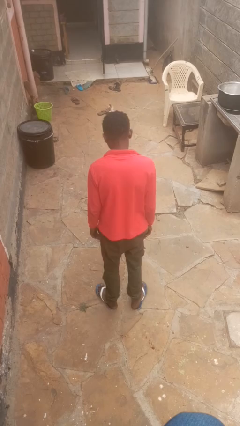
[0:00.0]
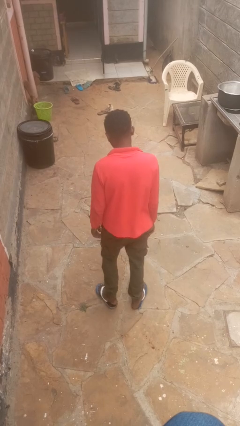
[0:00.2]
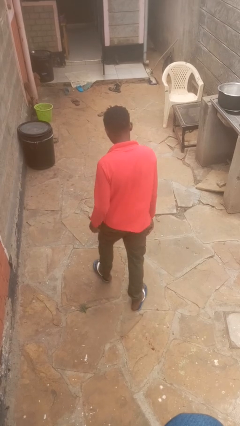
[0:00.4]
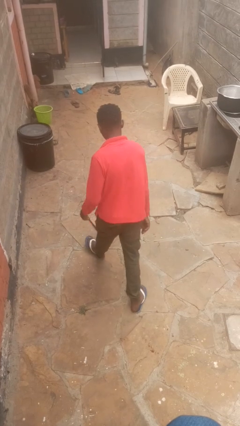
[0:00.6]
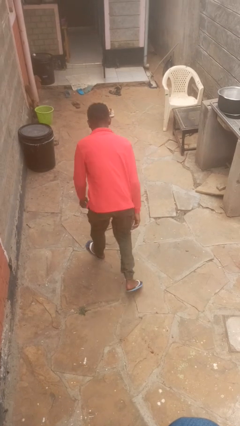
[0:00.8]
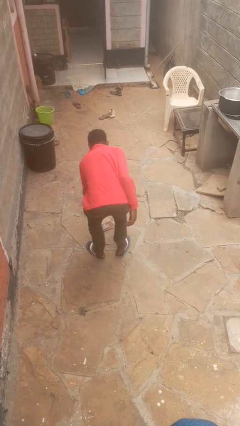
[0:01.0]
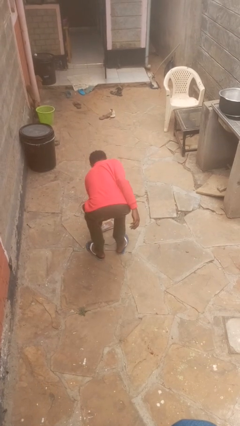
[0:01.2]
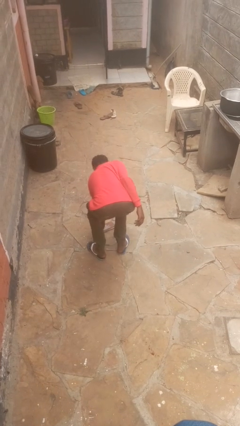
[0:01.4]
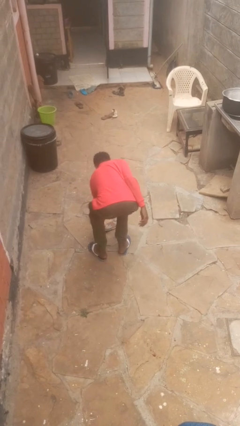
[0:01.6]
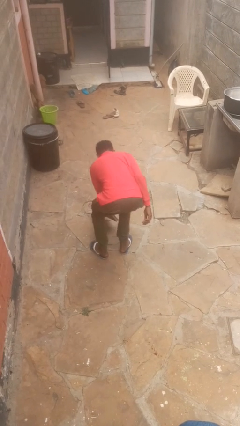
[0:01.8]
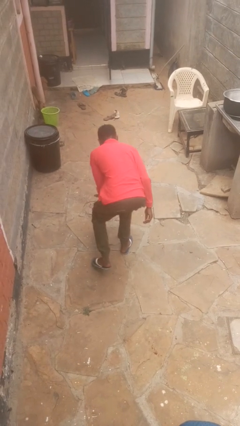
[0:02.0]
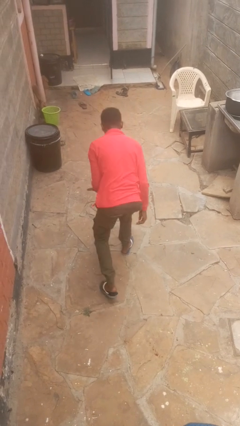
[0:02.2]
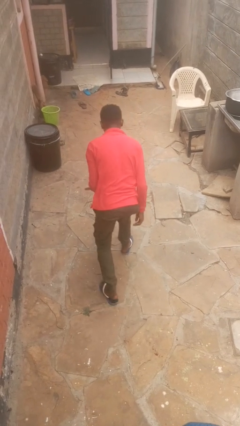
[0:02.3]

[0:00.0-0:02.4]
person picks up object from floor

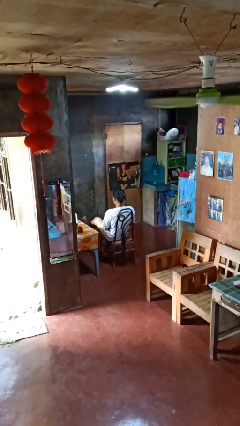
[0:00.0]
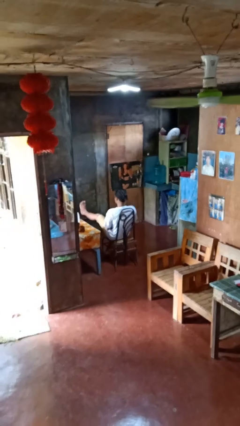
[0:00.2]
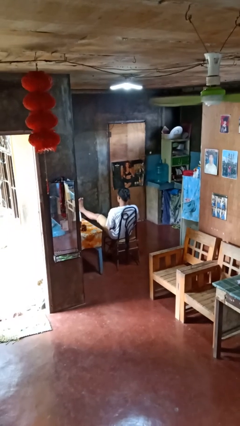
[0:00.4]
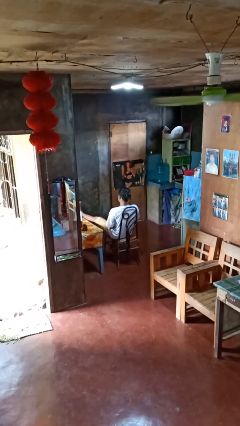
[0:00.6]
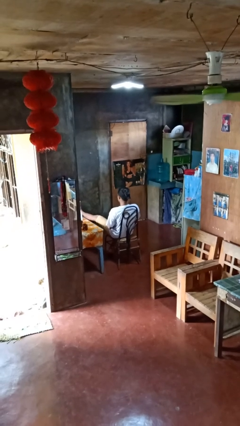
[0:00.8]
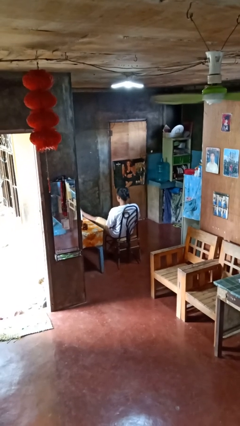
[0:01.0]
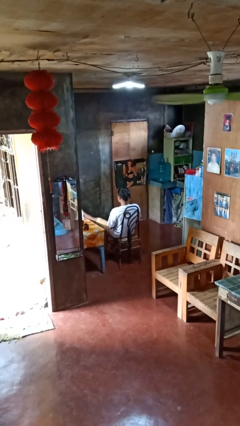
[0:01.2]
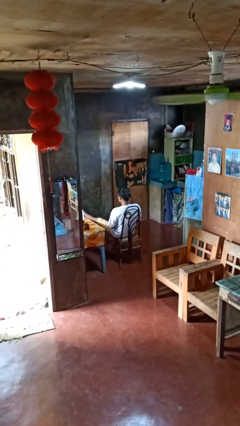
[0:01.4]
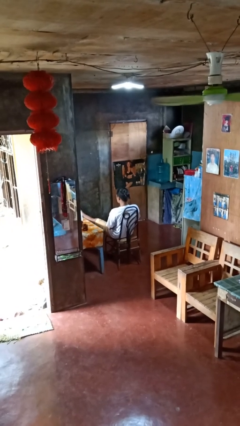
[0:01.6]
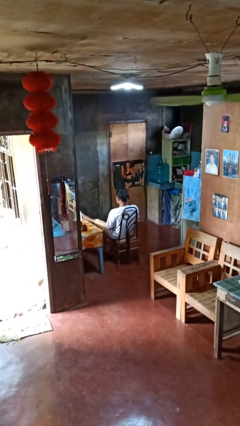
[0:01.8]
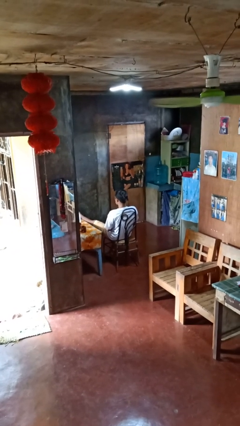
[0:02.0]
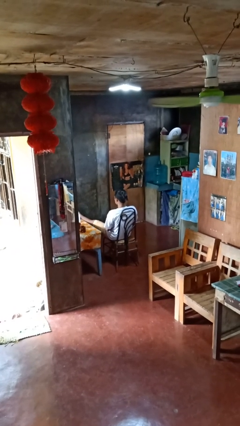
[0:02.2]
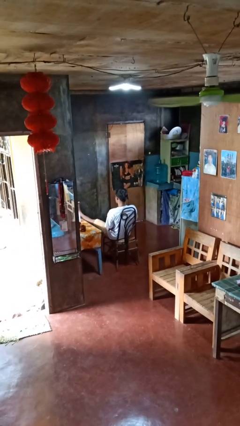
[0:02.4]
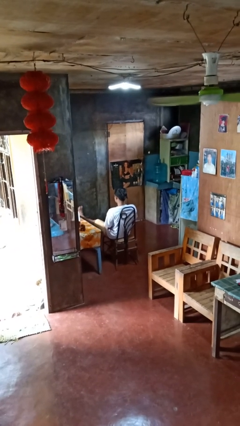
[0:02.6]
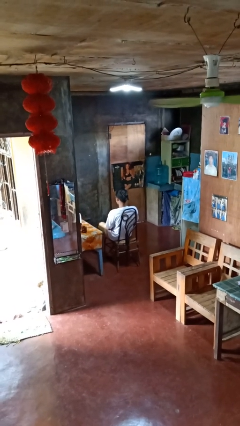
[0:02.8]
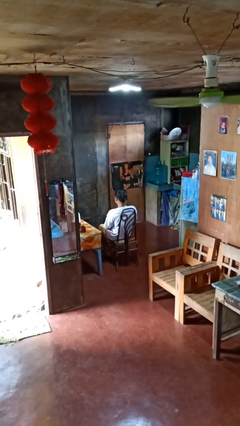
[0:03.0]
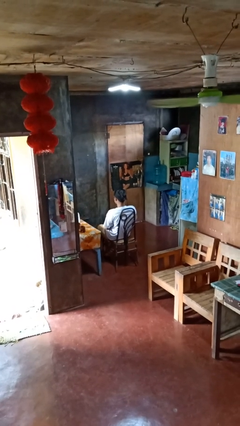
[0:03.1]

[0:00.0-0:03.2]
person puts feet up

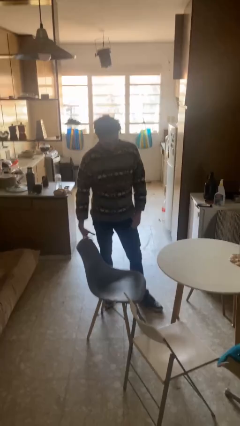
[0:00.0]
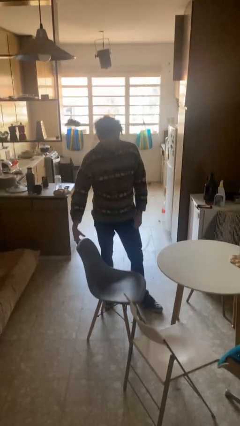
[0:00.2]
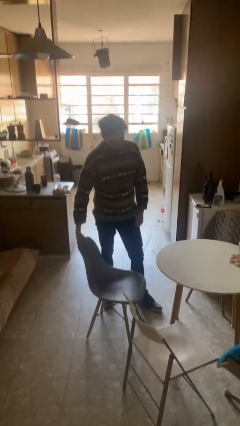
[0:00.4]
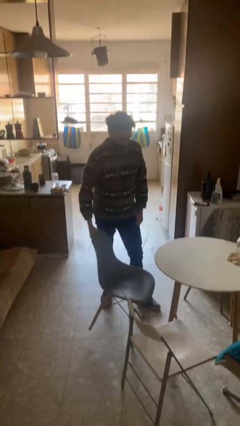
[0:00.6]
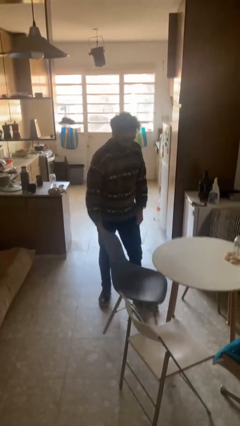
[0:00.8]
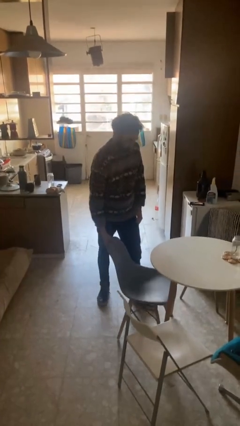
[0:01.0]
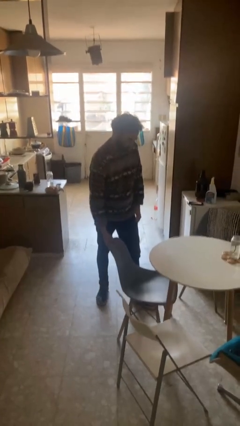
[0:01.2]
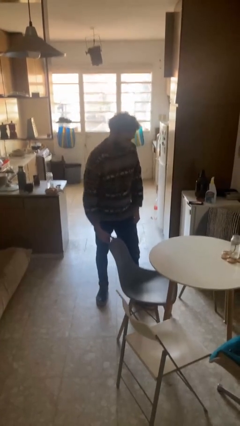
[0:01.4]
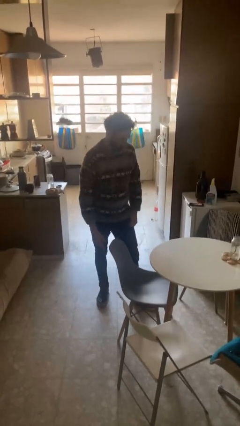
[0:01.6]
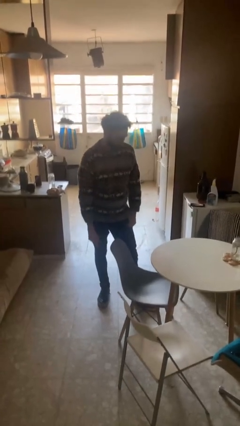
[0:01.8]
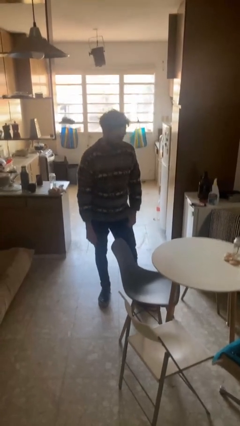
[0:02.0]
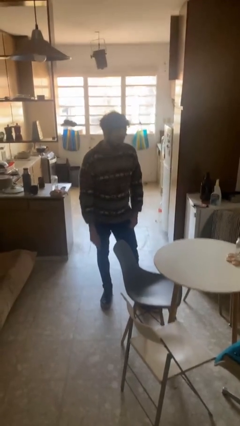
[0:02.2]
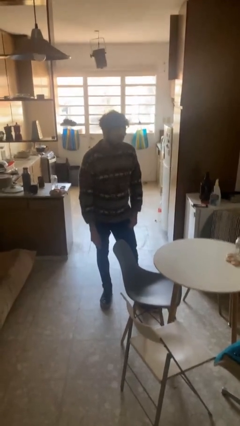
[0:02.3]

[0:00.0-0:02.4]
person pushes in chair

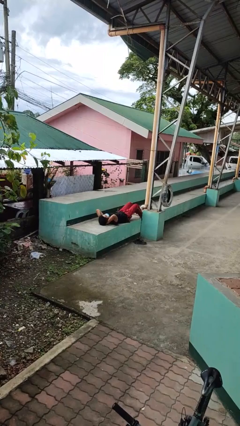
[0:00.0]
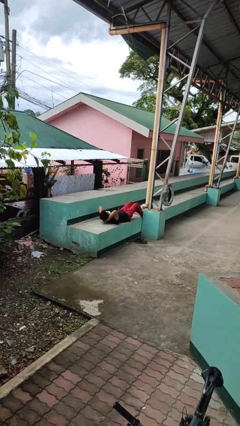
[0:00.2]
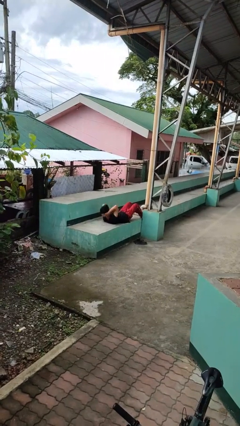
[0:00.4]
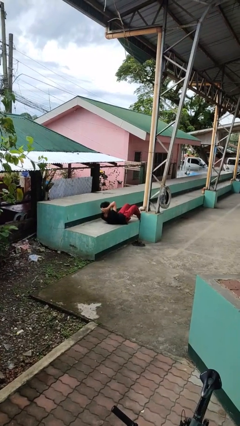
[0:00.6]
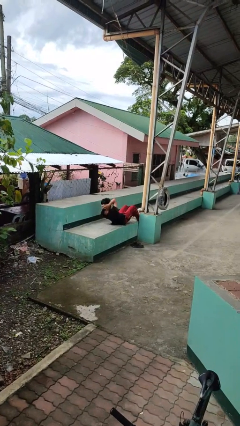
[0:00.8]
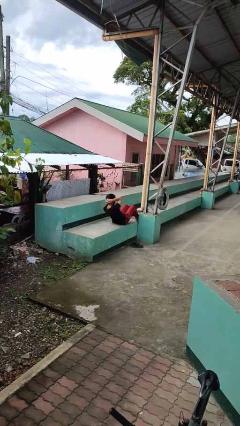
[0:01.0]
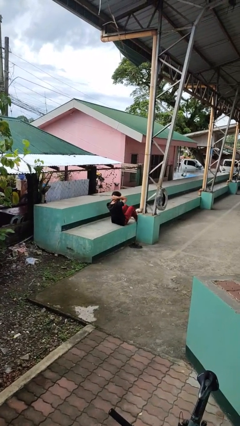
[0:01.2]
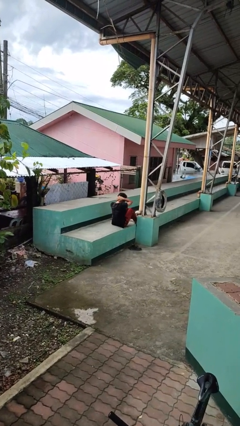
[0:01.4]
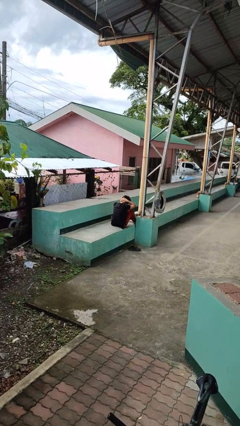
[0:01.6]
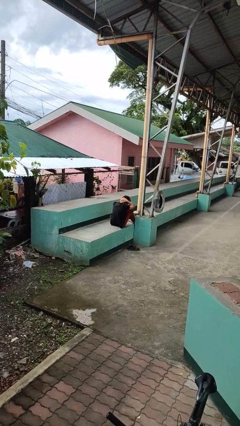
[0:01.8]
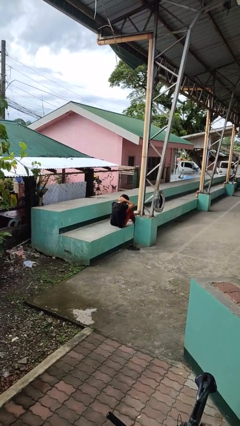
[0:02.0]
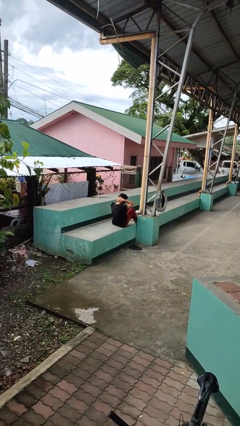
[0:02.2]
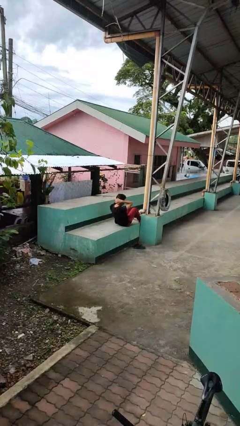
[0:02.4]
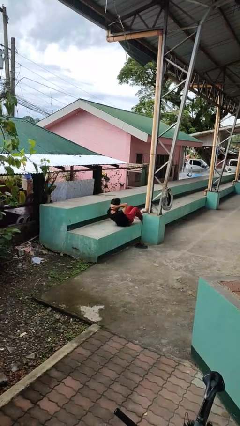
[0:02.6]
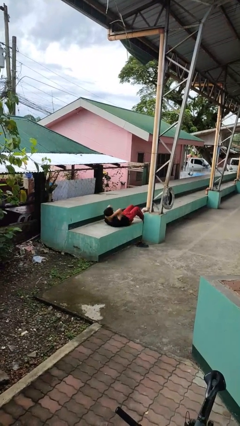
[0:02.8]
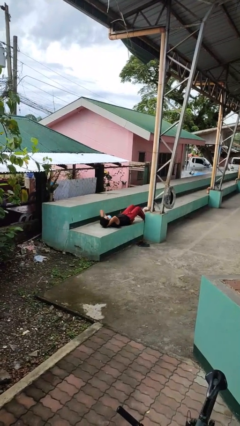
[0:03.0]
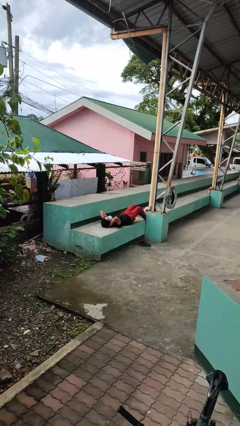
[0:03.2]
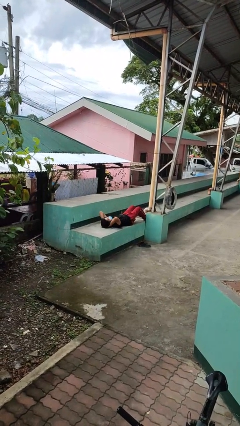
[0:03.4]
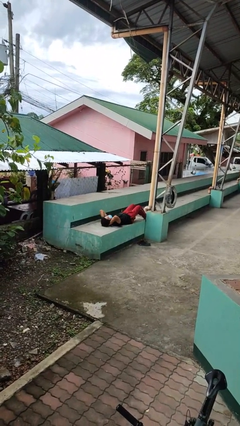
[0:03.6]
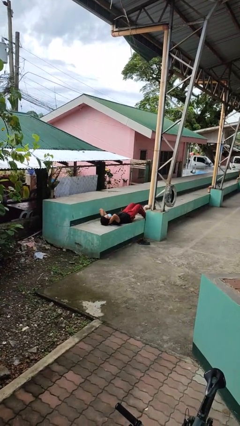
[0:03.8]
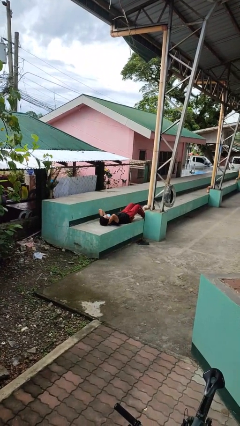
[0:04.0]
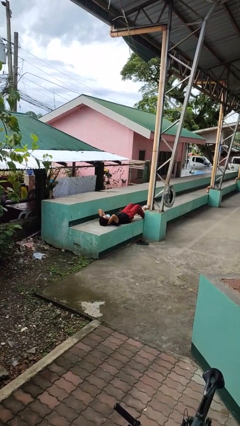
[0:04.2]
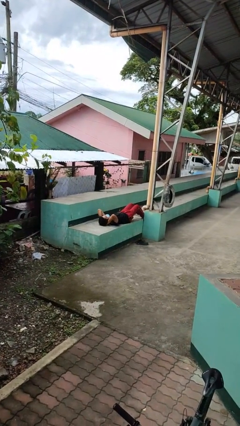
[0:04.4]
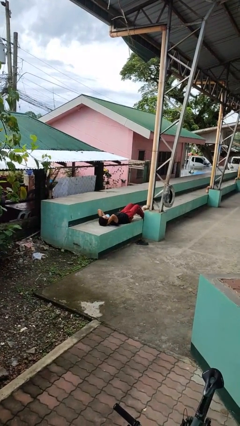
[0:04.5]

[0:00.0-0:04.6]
person exercises with situp

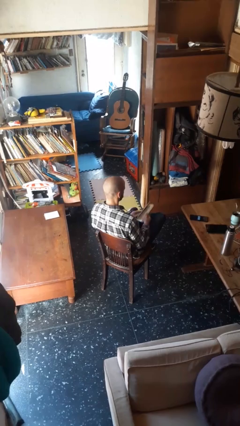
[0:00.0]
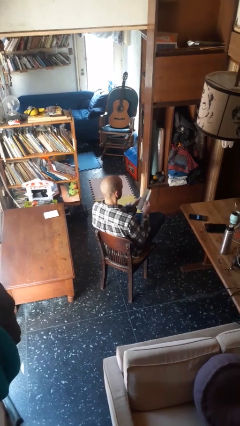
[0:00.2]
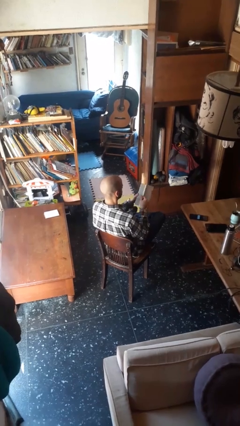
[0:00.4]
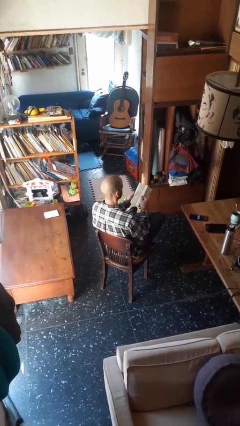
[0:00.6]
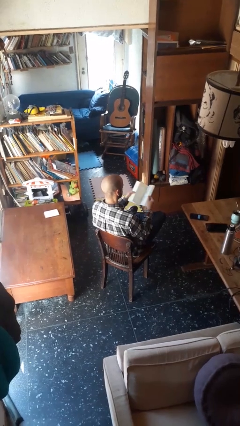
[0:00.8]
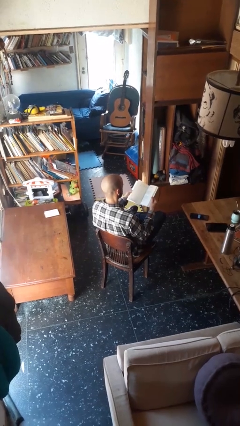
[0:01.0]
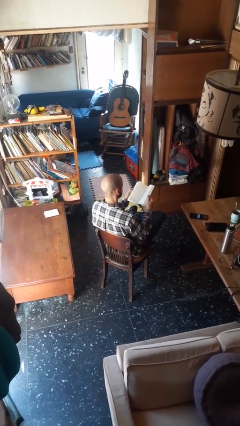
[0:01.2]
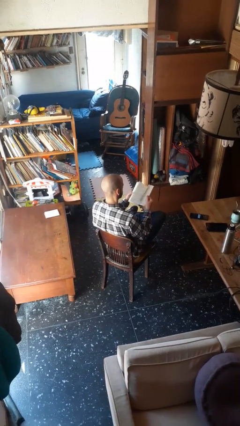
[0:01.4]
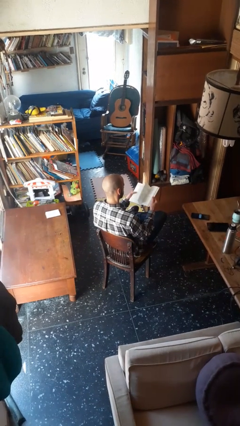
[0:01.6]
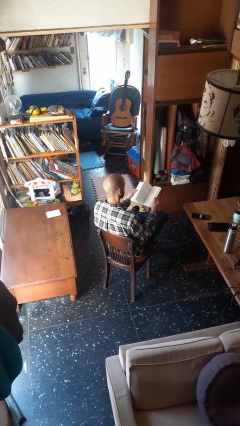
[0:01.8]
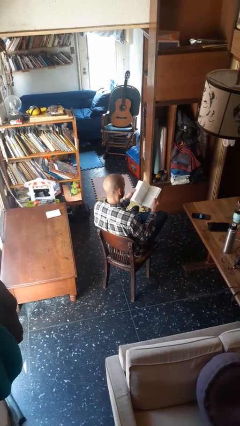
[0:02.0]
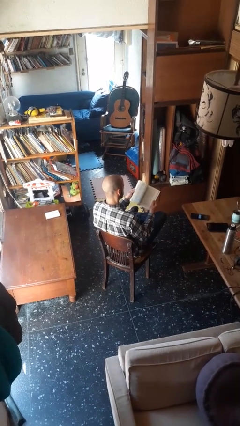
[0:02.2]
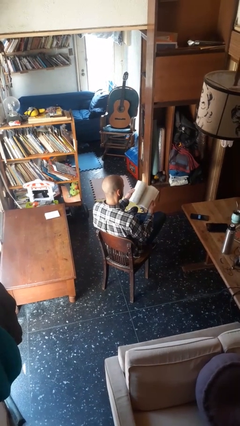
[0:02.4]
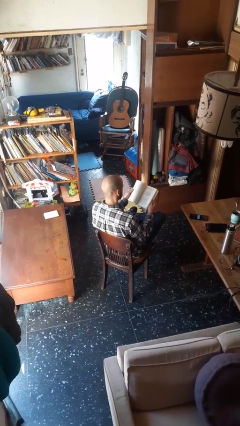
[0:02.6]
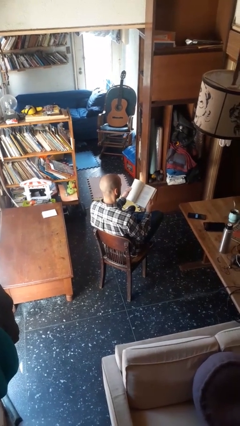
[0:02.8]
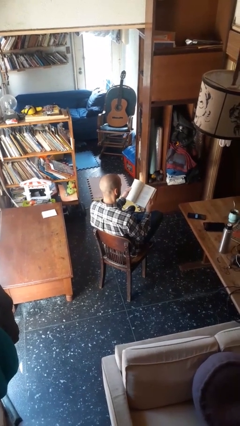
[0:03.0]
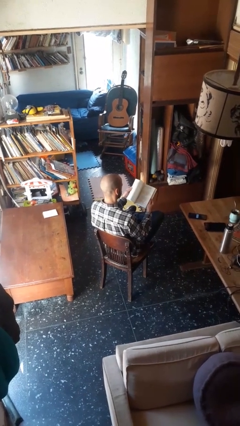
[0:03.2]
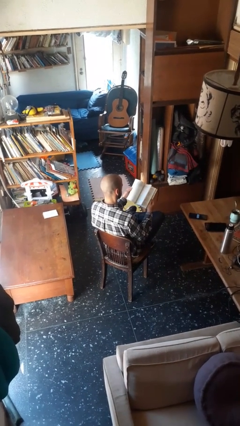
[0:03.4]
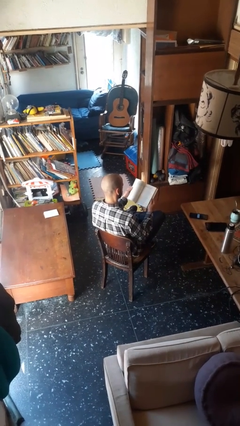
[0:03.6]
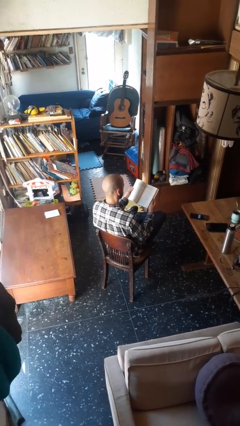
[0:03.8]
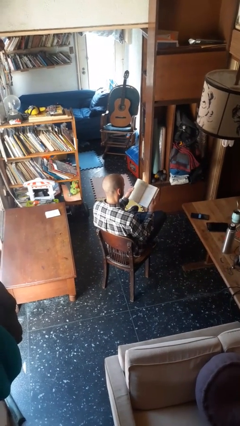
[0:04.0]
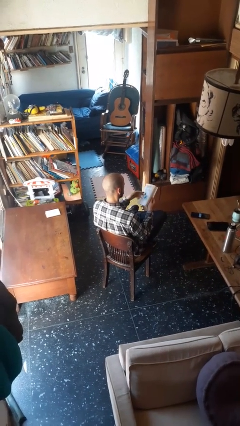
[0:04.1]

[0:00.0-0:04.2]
person reads book

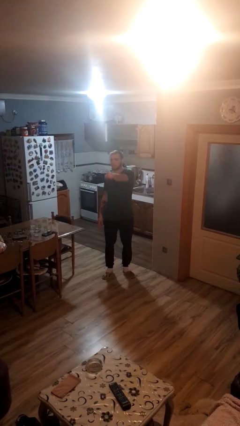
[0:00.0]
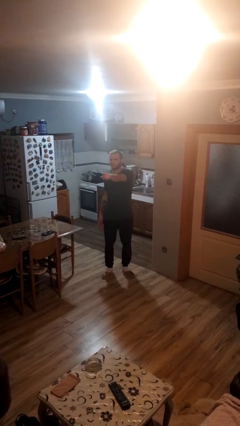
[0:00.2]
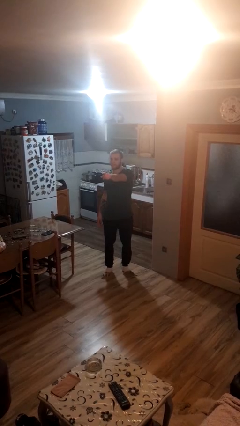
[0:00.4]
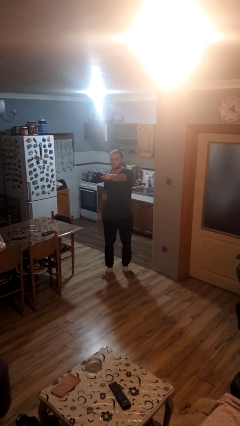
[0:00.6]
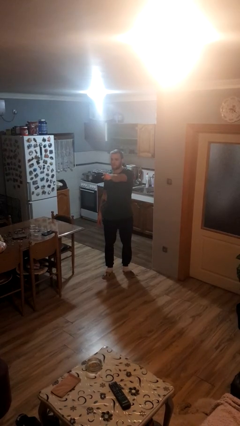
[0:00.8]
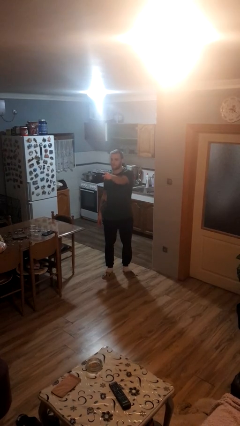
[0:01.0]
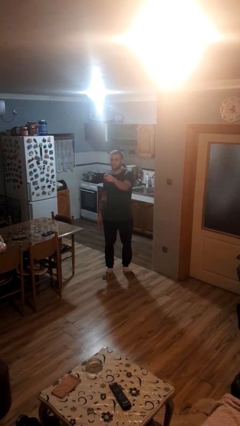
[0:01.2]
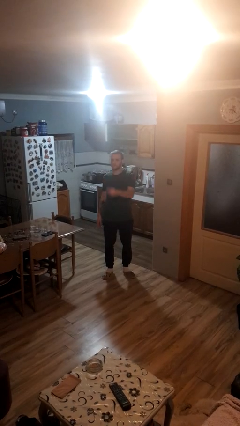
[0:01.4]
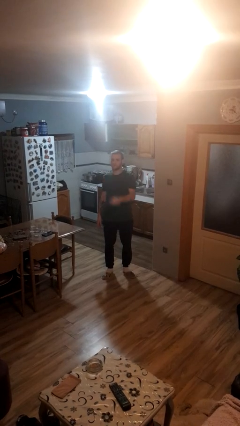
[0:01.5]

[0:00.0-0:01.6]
person points at person
